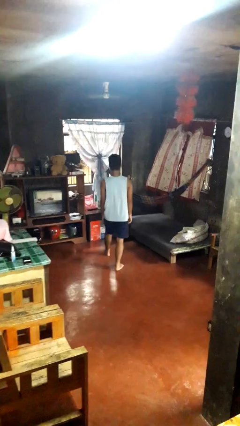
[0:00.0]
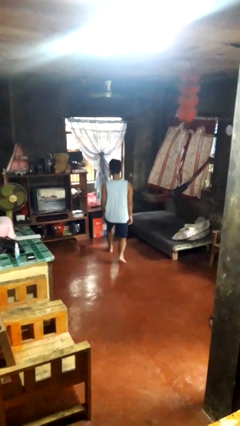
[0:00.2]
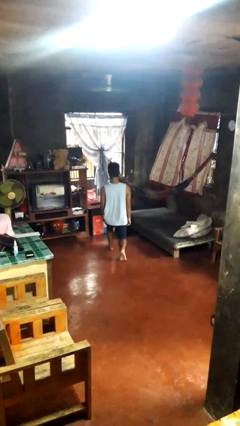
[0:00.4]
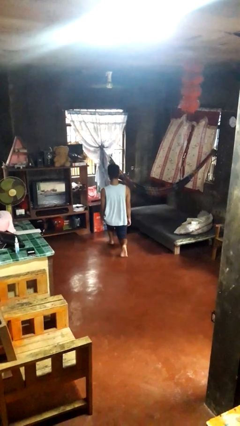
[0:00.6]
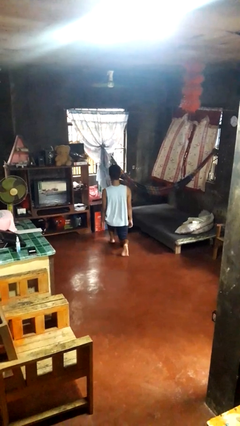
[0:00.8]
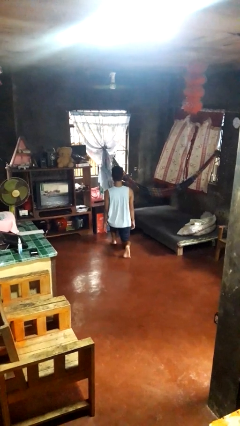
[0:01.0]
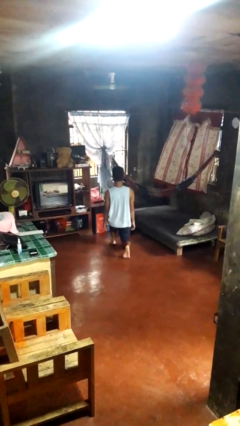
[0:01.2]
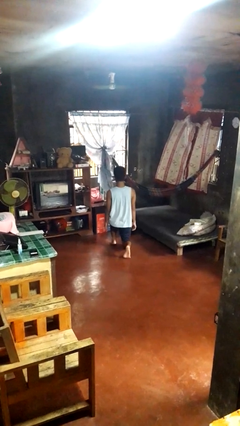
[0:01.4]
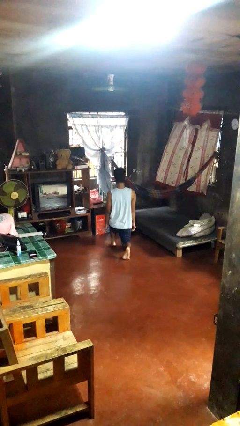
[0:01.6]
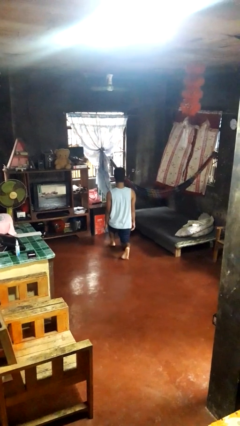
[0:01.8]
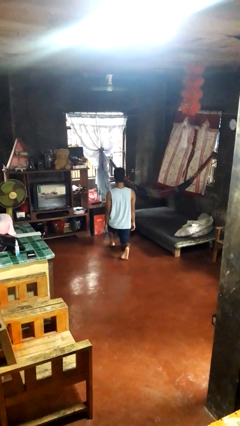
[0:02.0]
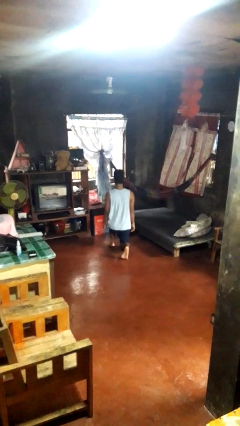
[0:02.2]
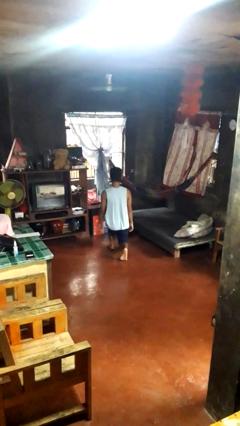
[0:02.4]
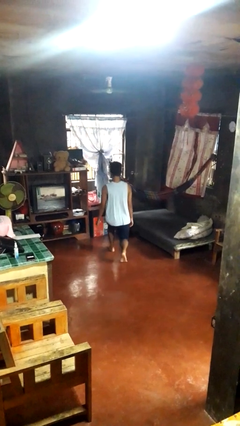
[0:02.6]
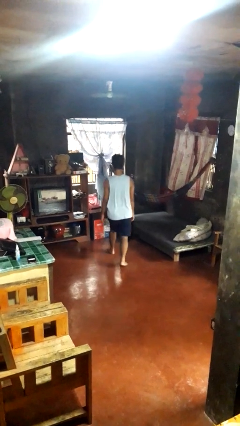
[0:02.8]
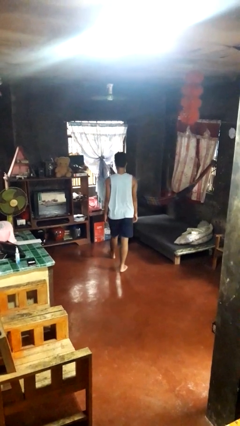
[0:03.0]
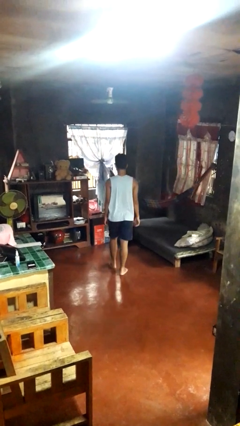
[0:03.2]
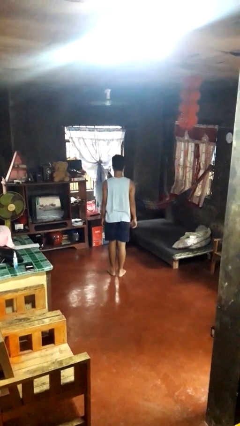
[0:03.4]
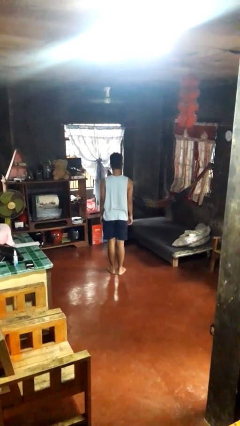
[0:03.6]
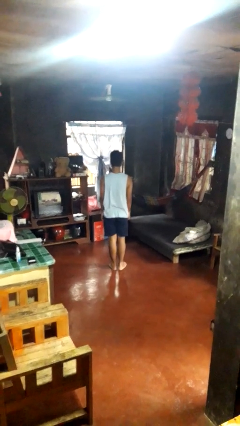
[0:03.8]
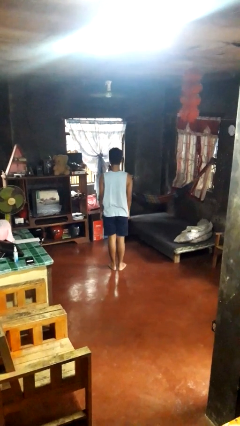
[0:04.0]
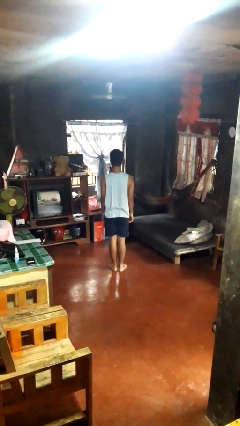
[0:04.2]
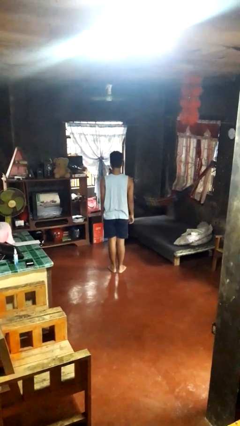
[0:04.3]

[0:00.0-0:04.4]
person exercises with lunges

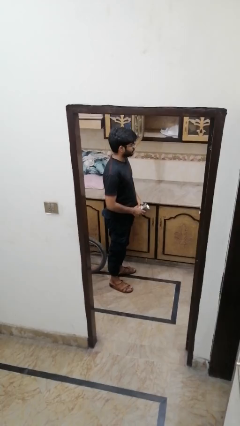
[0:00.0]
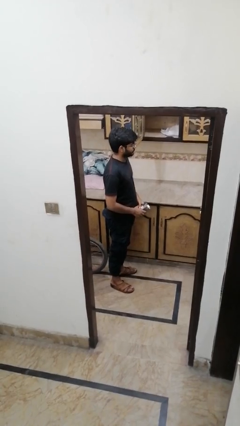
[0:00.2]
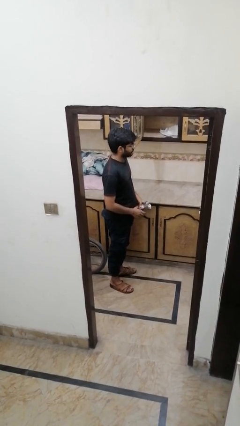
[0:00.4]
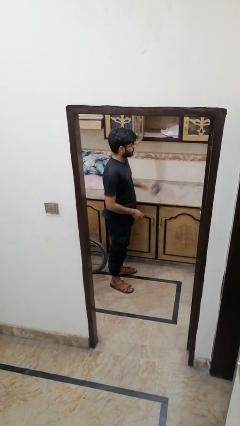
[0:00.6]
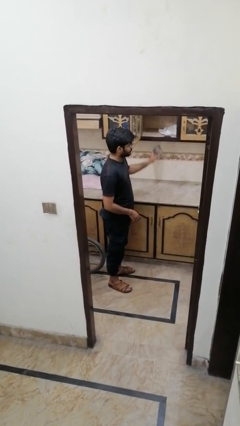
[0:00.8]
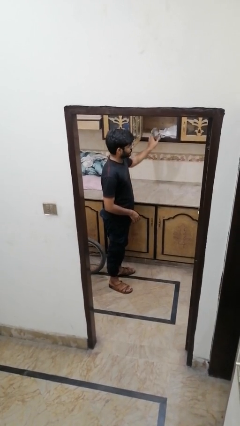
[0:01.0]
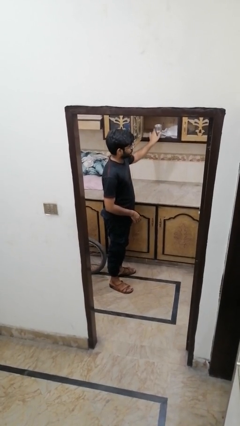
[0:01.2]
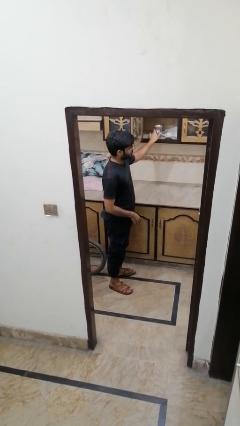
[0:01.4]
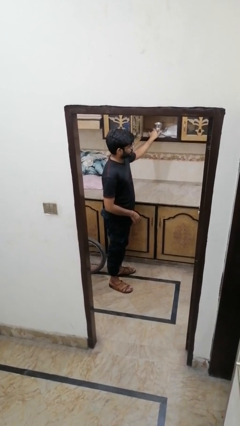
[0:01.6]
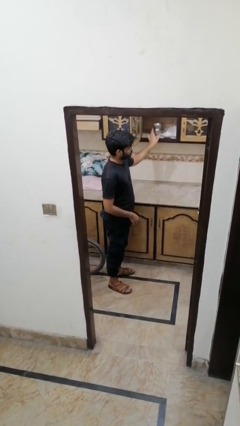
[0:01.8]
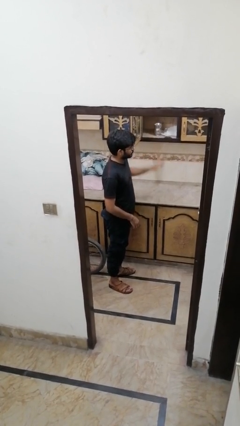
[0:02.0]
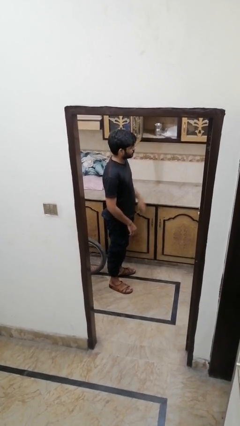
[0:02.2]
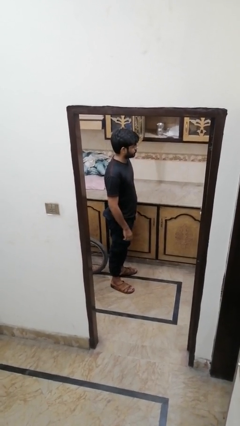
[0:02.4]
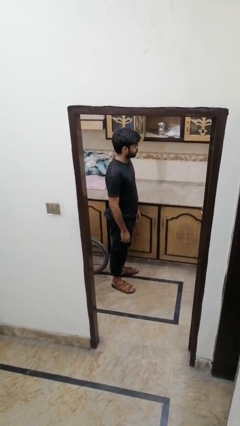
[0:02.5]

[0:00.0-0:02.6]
person puts down object into cabinet

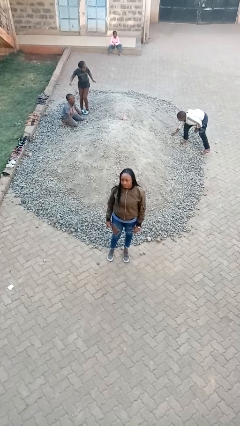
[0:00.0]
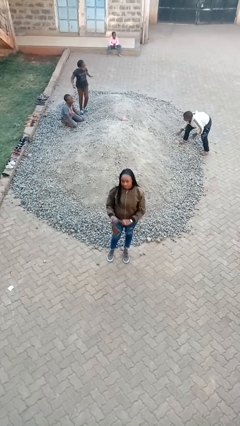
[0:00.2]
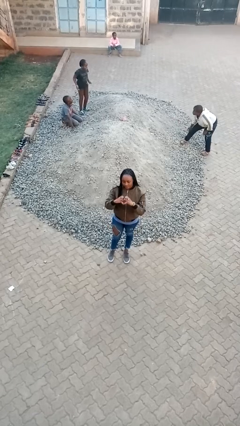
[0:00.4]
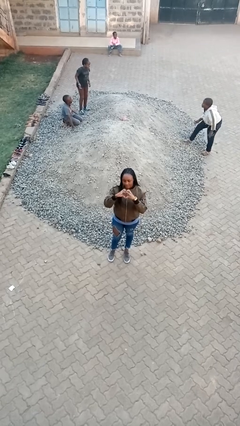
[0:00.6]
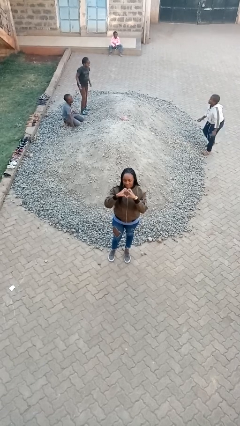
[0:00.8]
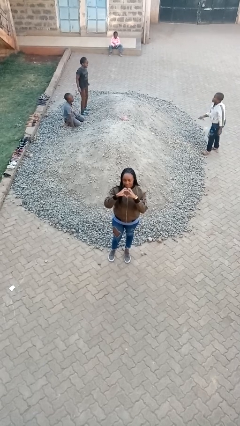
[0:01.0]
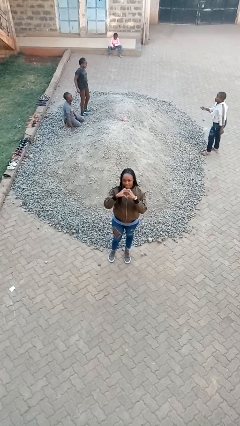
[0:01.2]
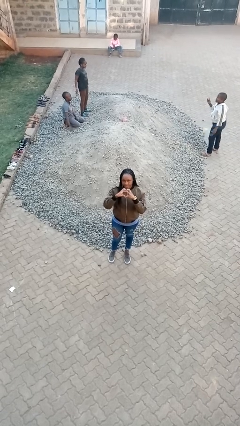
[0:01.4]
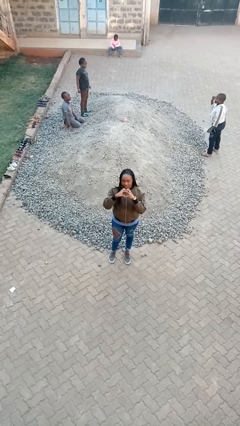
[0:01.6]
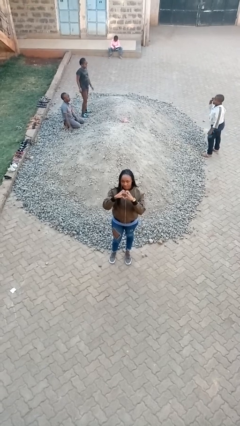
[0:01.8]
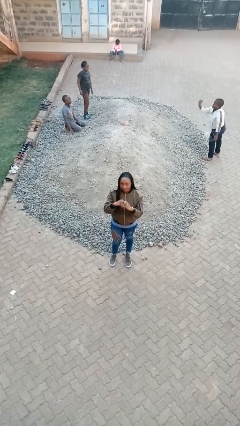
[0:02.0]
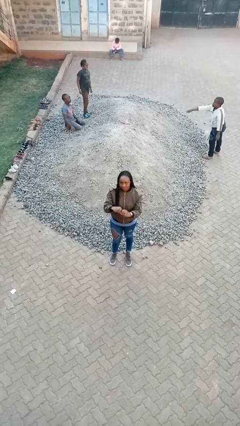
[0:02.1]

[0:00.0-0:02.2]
person gestures heart

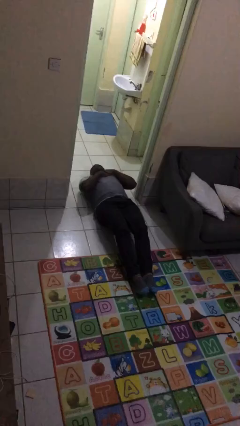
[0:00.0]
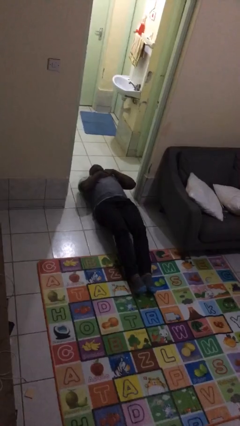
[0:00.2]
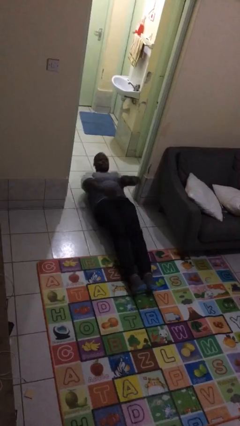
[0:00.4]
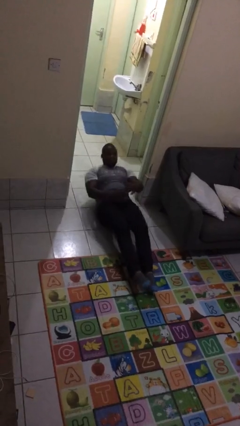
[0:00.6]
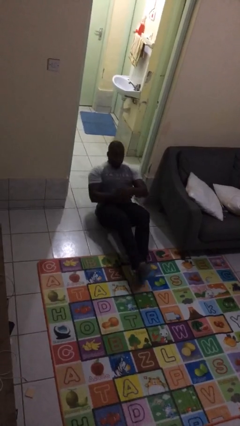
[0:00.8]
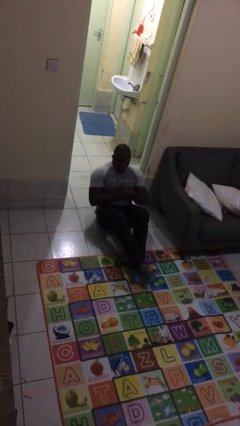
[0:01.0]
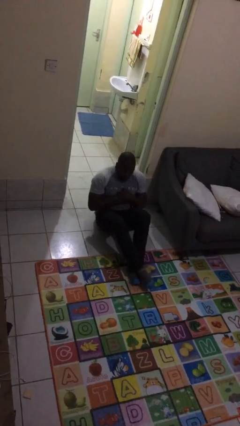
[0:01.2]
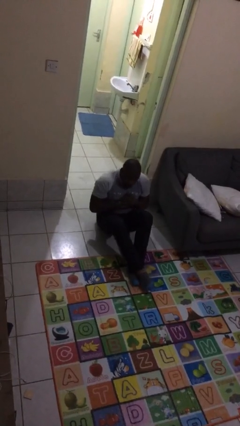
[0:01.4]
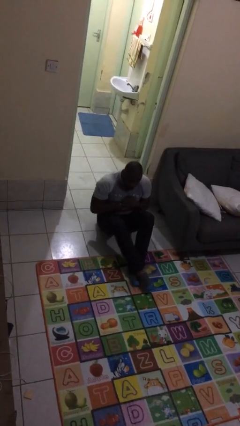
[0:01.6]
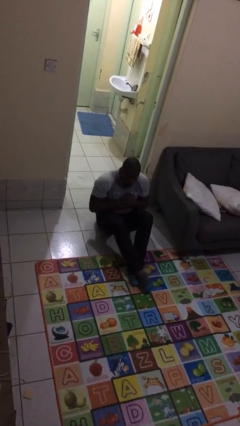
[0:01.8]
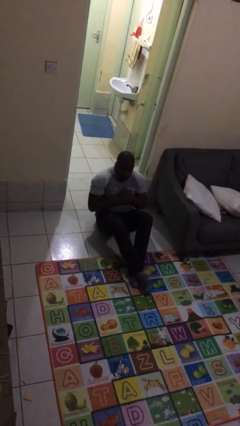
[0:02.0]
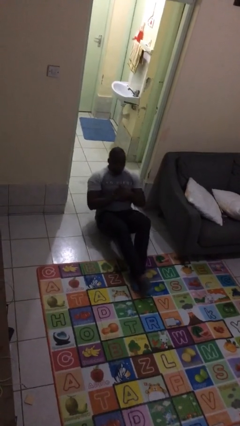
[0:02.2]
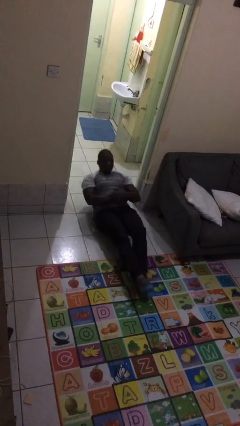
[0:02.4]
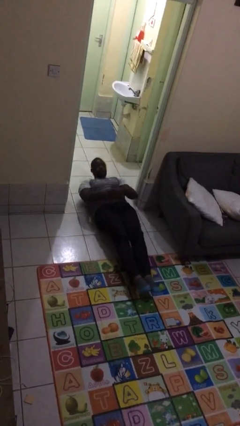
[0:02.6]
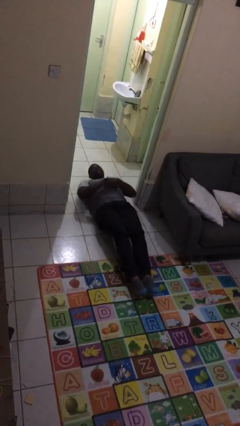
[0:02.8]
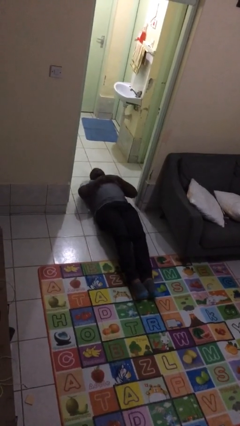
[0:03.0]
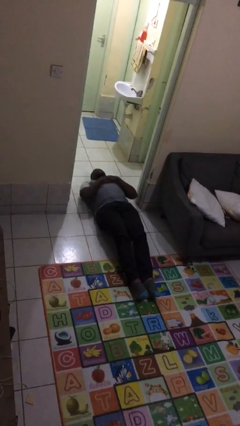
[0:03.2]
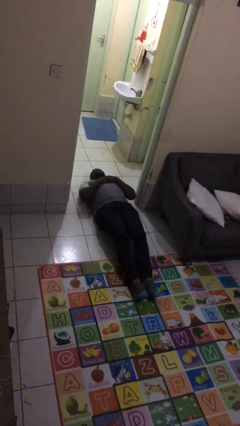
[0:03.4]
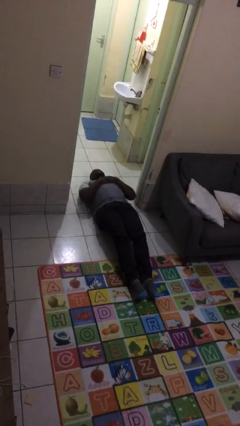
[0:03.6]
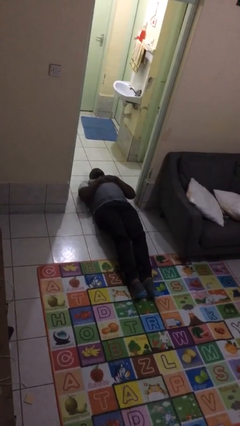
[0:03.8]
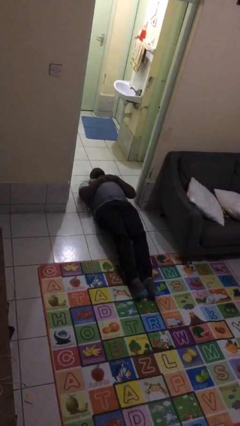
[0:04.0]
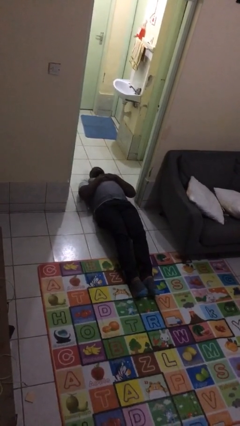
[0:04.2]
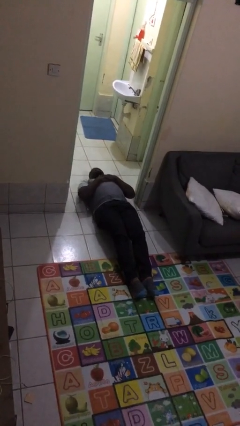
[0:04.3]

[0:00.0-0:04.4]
person exercises with situp

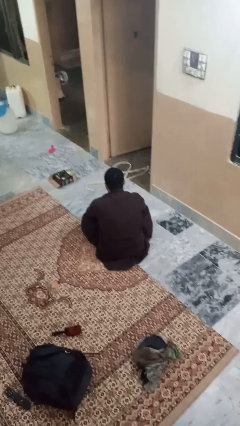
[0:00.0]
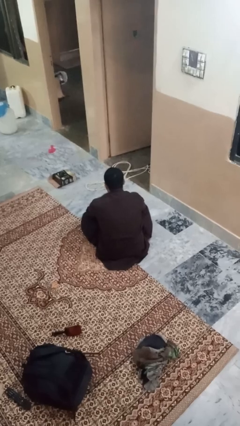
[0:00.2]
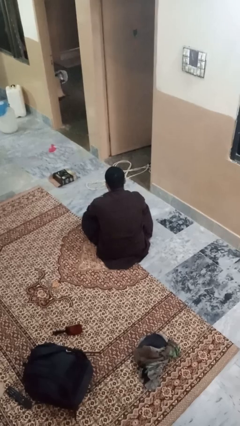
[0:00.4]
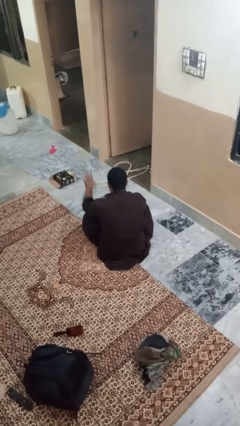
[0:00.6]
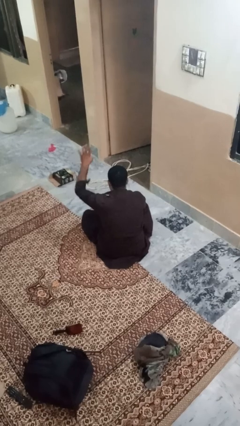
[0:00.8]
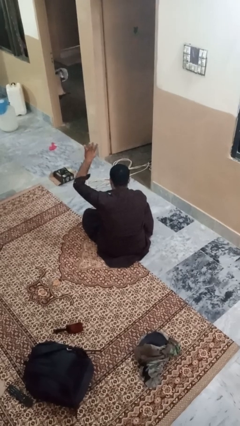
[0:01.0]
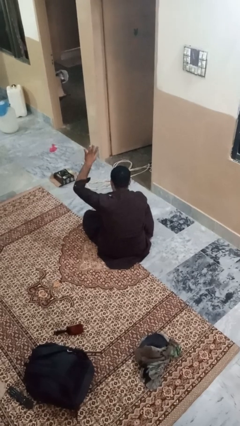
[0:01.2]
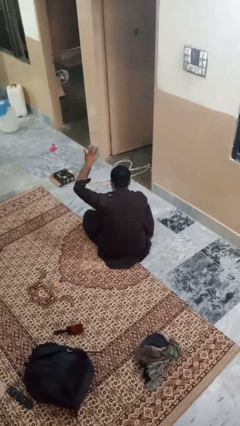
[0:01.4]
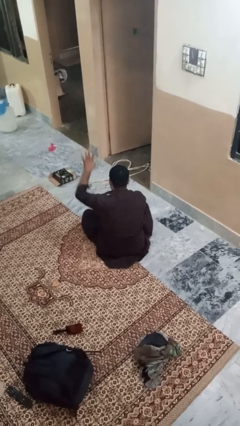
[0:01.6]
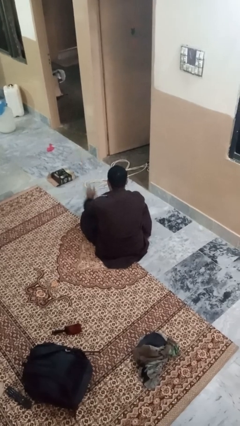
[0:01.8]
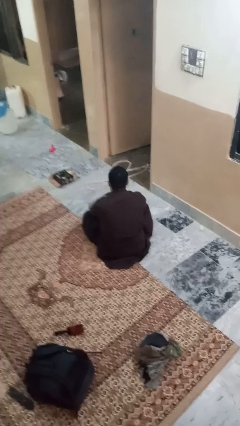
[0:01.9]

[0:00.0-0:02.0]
person gestures number four

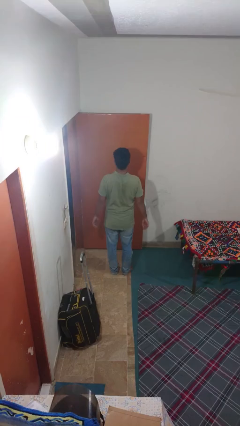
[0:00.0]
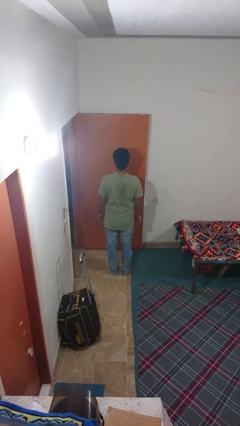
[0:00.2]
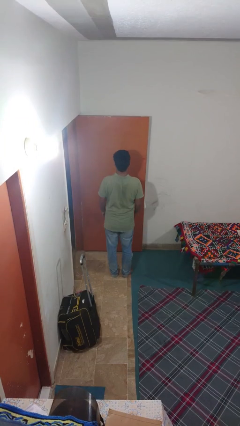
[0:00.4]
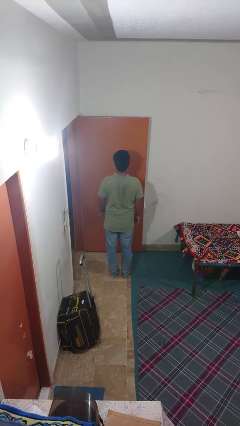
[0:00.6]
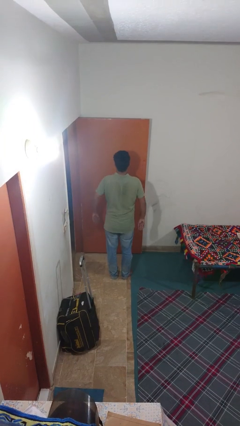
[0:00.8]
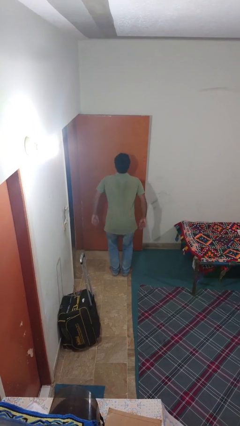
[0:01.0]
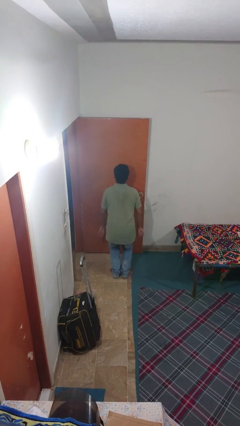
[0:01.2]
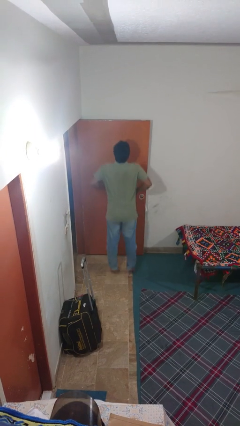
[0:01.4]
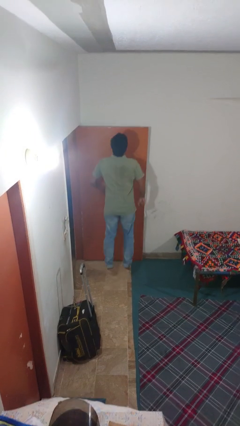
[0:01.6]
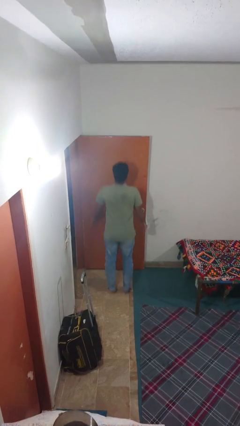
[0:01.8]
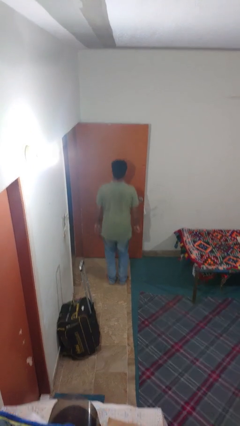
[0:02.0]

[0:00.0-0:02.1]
person jumps
